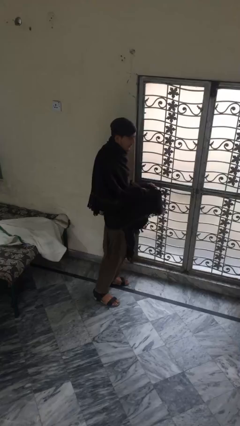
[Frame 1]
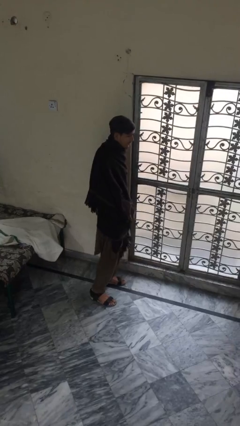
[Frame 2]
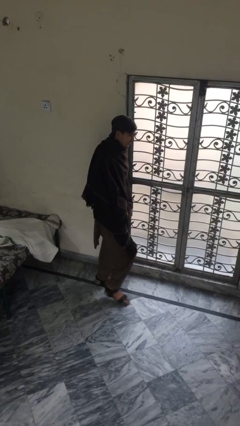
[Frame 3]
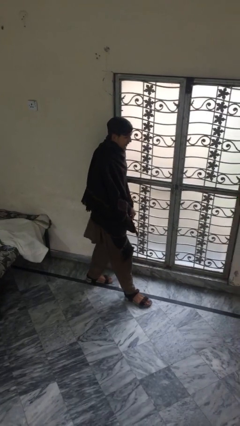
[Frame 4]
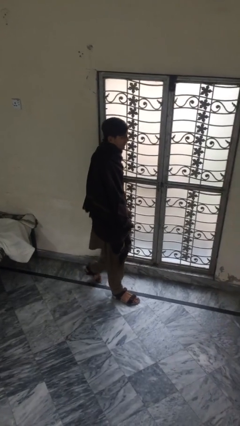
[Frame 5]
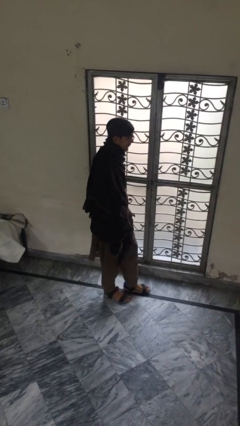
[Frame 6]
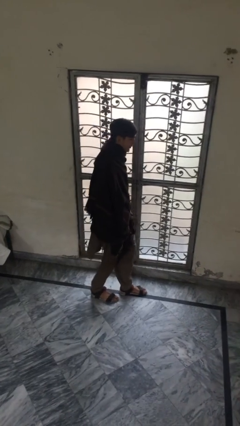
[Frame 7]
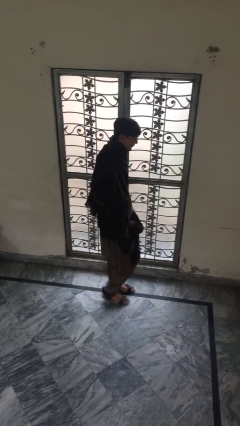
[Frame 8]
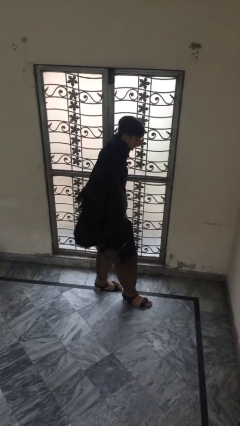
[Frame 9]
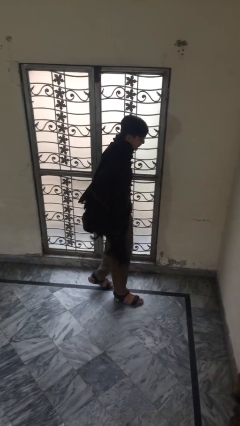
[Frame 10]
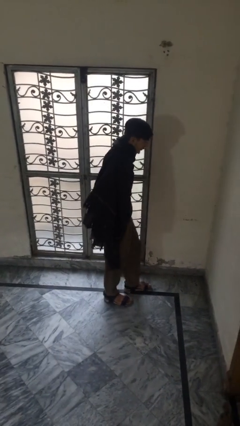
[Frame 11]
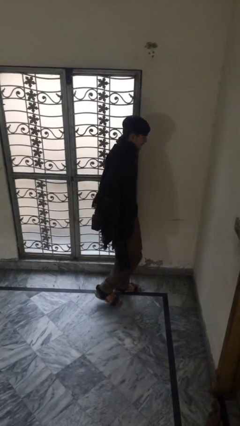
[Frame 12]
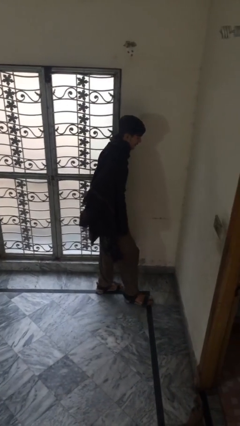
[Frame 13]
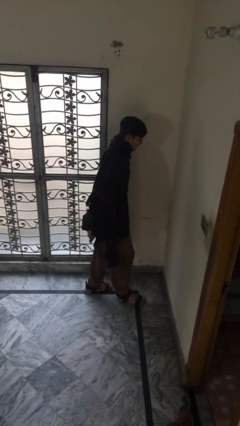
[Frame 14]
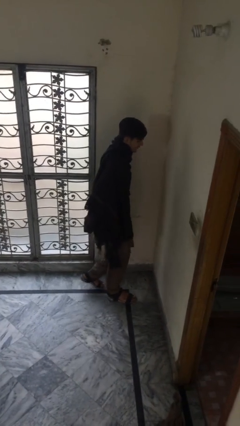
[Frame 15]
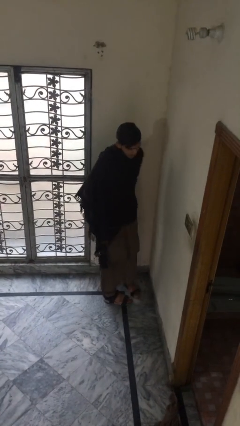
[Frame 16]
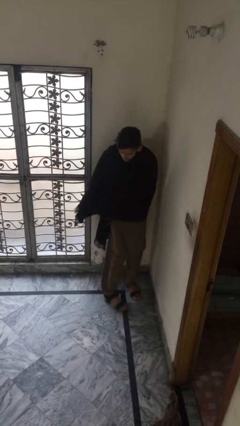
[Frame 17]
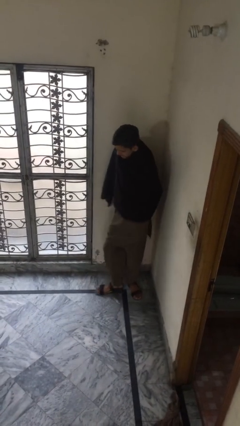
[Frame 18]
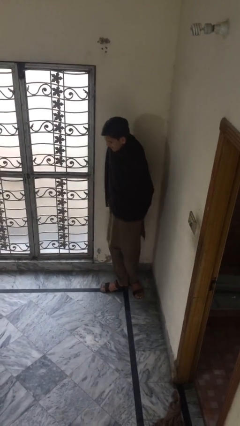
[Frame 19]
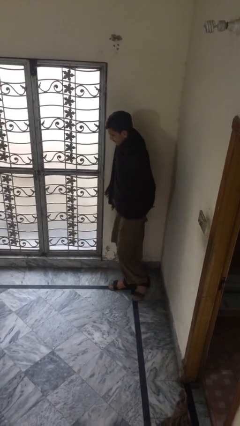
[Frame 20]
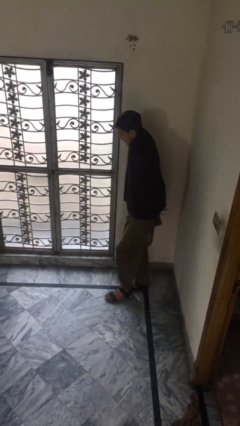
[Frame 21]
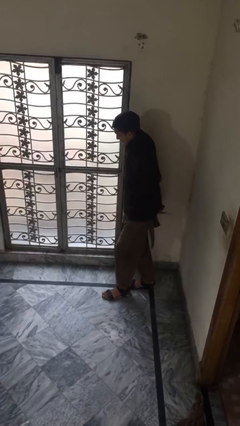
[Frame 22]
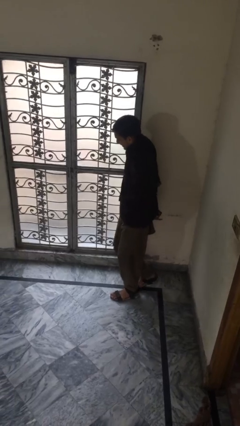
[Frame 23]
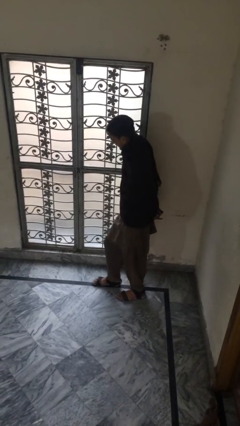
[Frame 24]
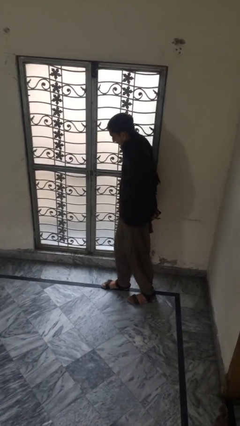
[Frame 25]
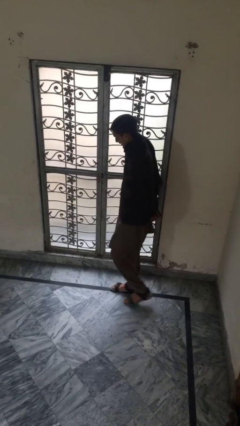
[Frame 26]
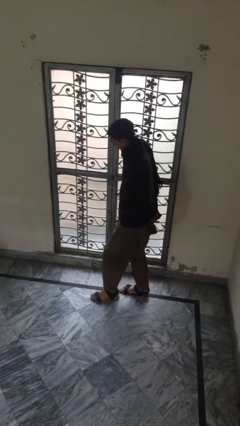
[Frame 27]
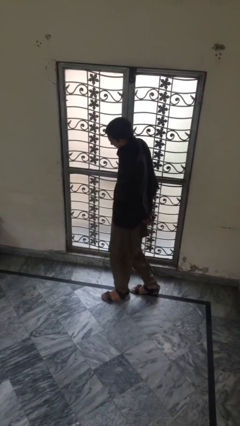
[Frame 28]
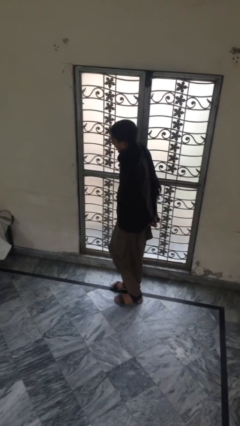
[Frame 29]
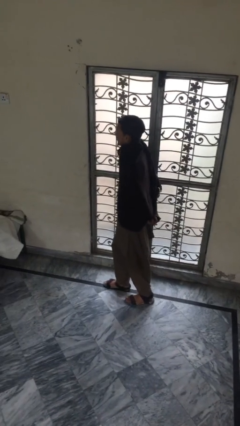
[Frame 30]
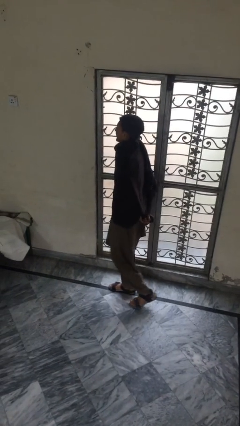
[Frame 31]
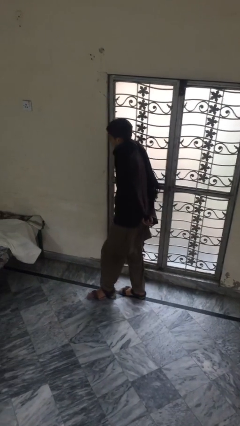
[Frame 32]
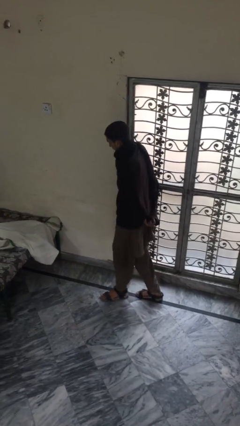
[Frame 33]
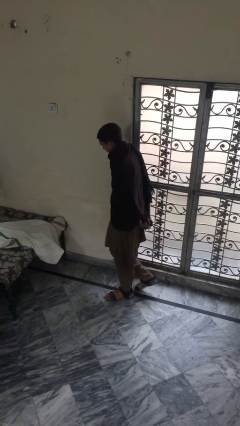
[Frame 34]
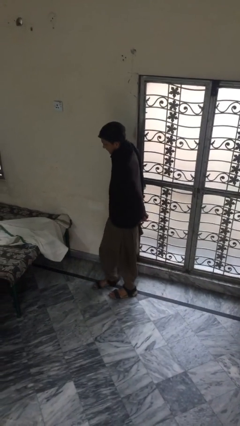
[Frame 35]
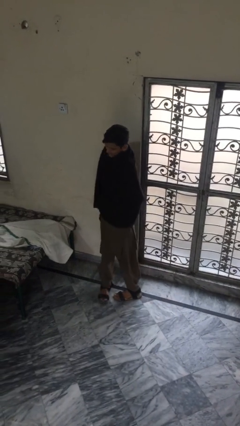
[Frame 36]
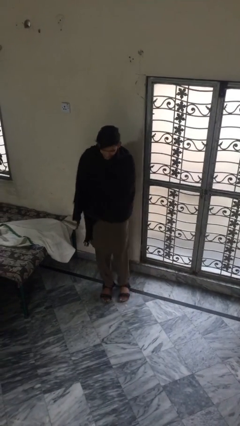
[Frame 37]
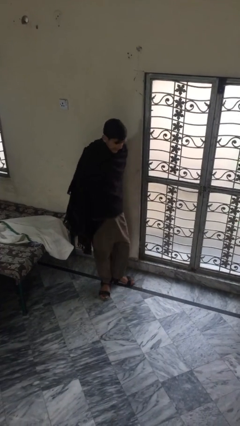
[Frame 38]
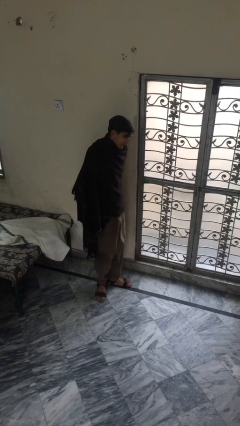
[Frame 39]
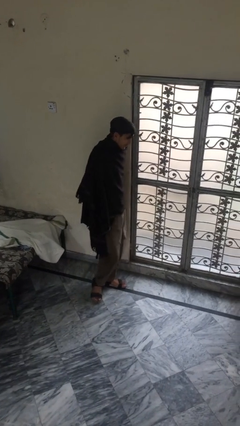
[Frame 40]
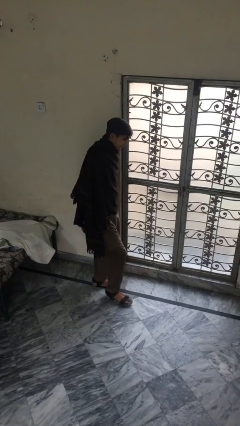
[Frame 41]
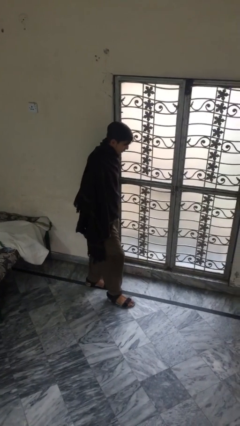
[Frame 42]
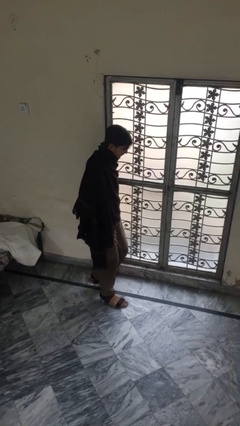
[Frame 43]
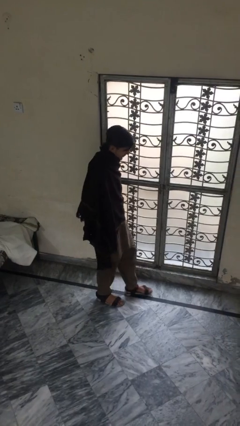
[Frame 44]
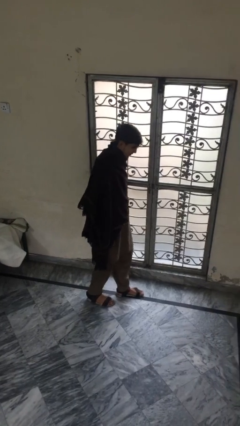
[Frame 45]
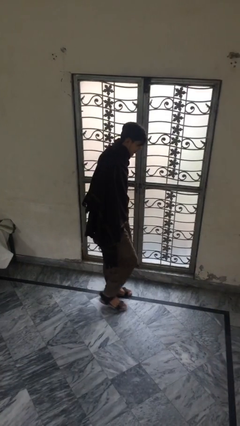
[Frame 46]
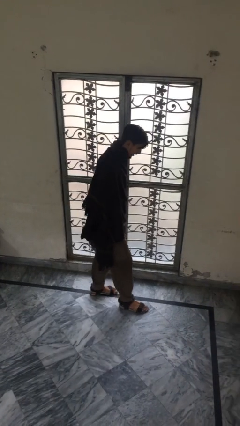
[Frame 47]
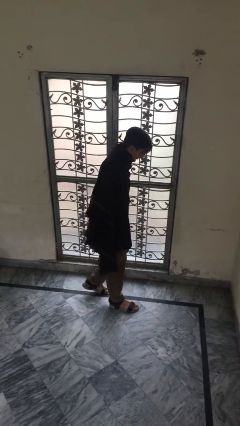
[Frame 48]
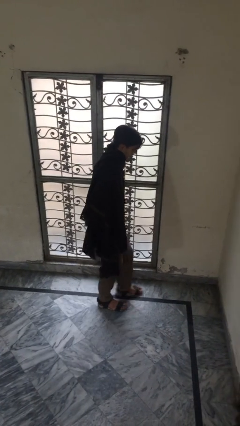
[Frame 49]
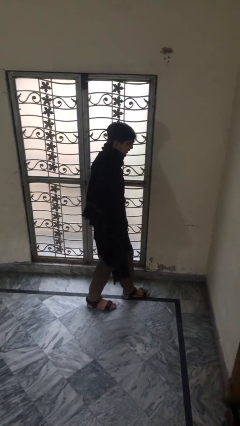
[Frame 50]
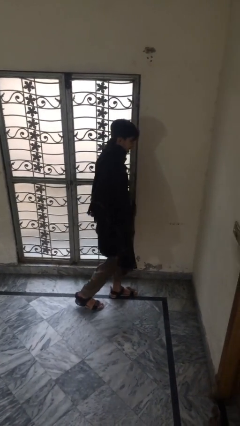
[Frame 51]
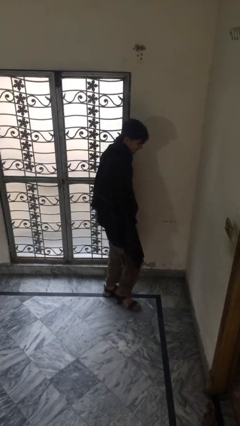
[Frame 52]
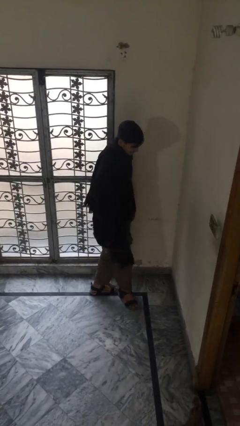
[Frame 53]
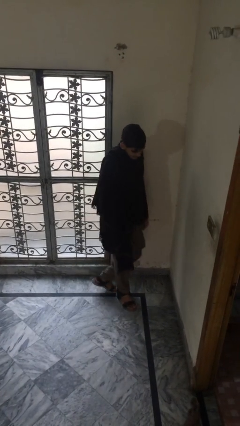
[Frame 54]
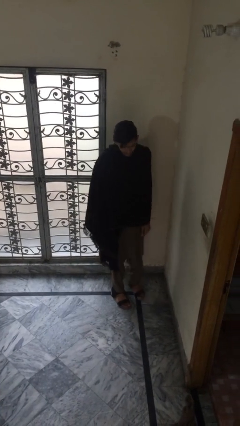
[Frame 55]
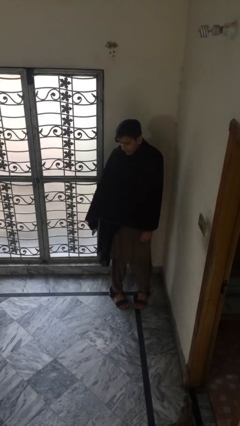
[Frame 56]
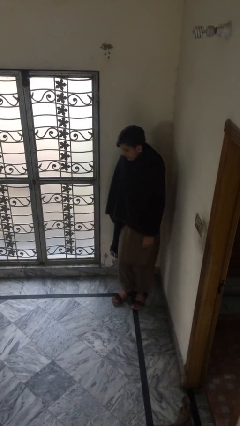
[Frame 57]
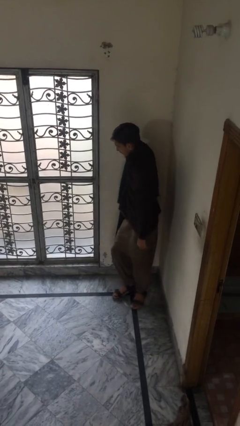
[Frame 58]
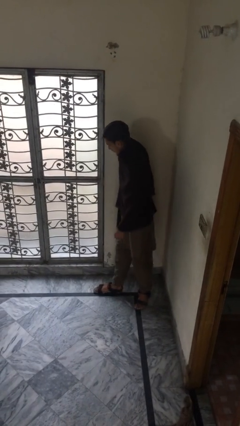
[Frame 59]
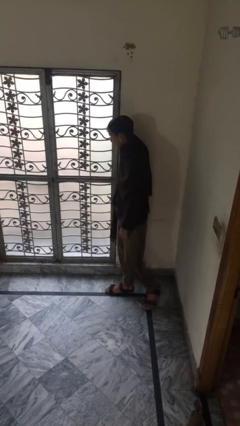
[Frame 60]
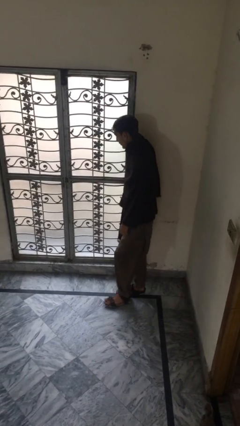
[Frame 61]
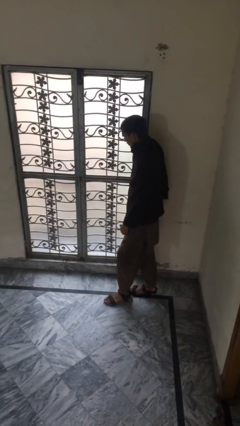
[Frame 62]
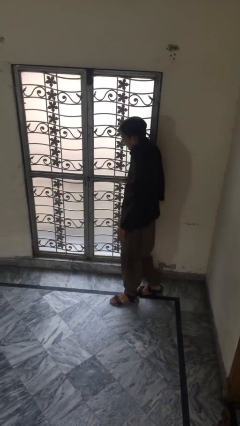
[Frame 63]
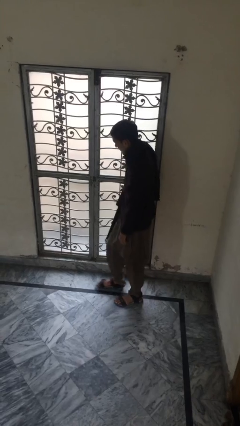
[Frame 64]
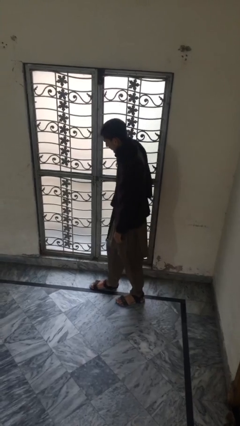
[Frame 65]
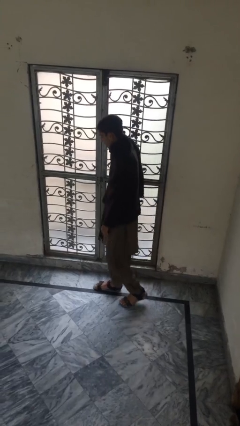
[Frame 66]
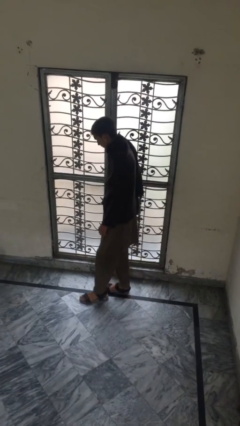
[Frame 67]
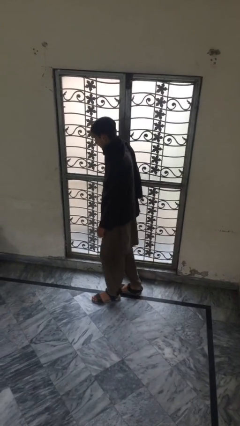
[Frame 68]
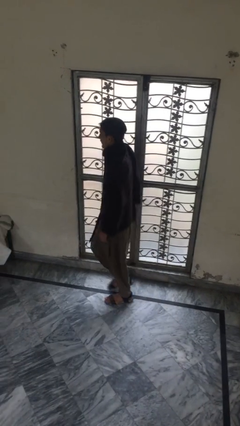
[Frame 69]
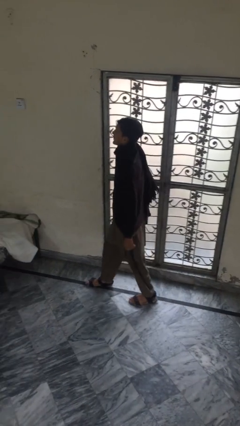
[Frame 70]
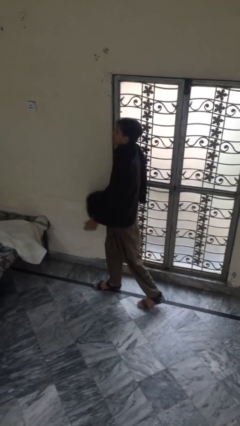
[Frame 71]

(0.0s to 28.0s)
person walks

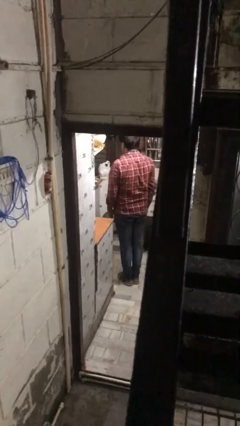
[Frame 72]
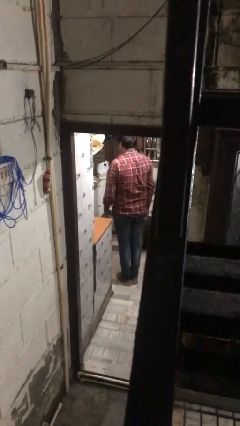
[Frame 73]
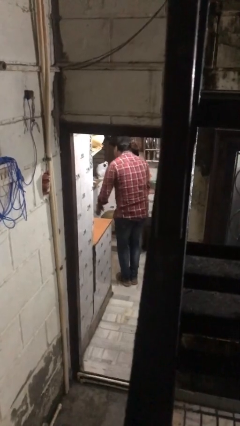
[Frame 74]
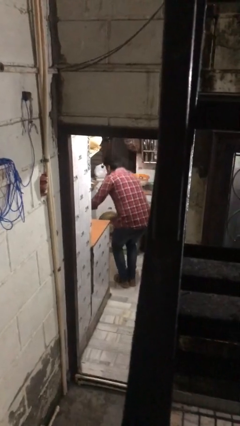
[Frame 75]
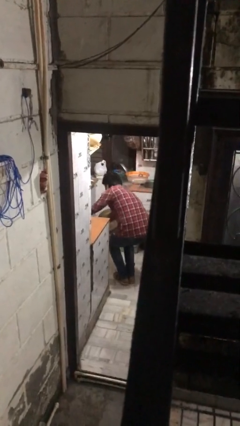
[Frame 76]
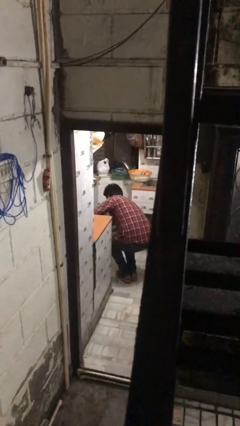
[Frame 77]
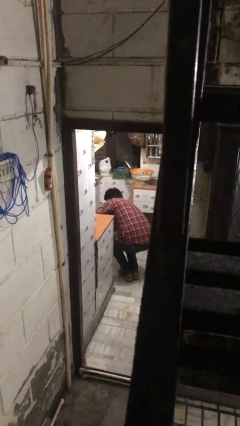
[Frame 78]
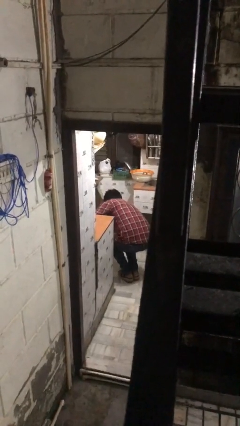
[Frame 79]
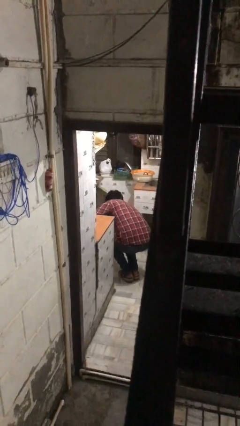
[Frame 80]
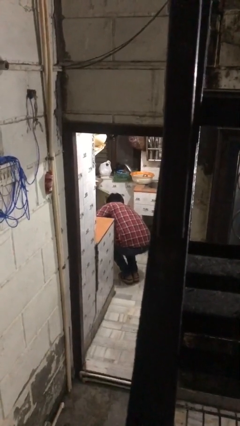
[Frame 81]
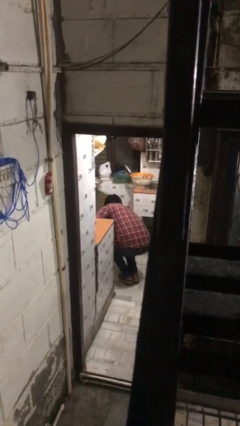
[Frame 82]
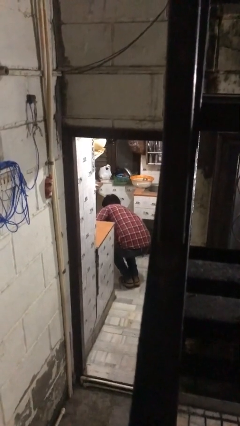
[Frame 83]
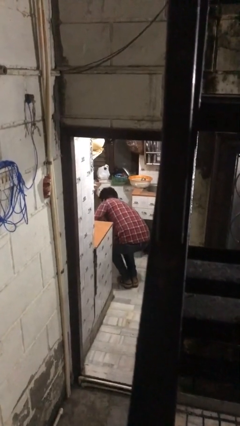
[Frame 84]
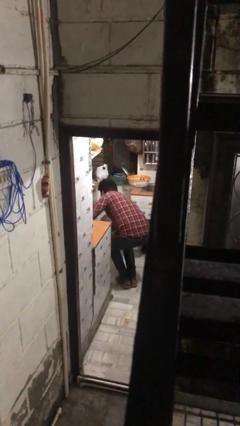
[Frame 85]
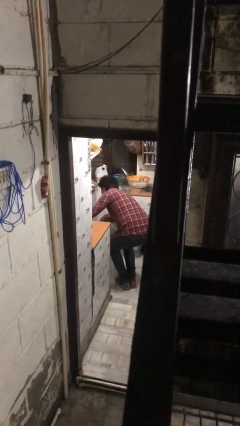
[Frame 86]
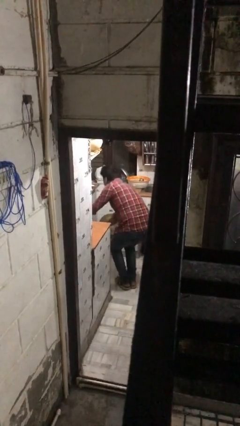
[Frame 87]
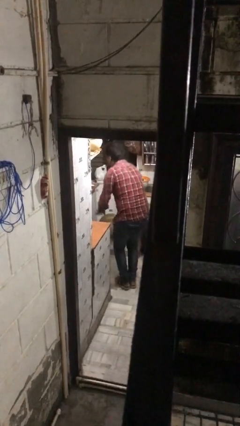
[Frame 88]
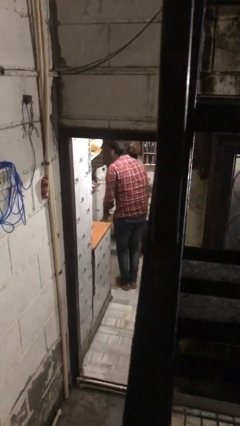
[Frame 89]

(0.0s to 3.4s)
person searches in kitchen drawer
